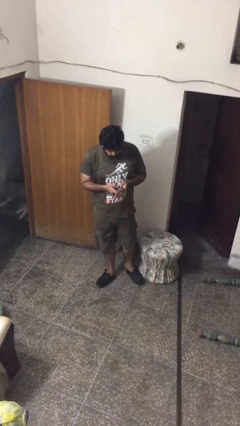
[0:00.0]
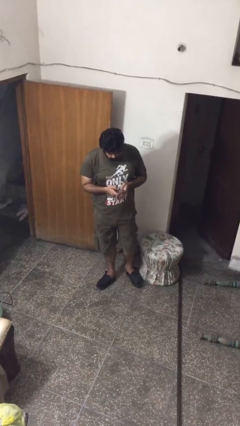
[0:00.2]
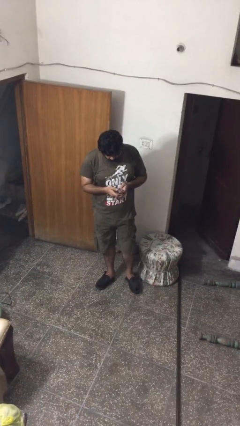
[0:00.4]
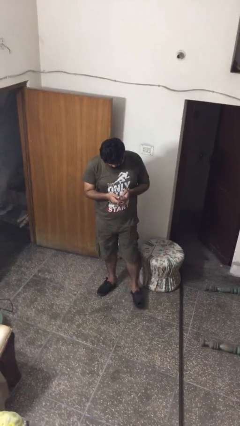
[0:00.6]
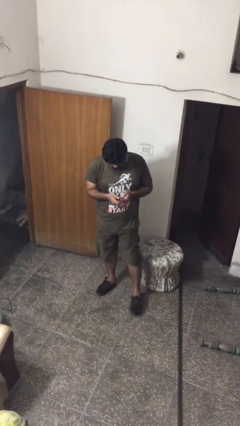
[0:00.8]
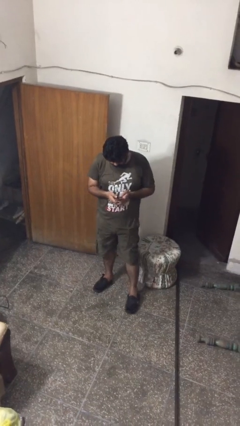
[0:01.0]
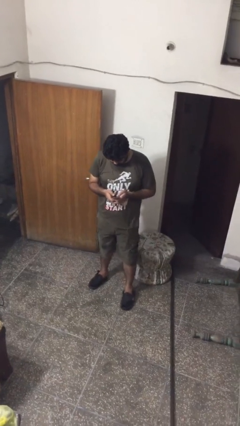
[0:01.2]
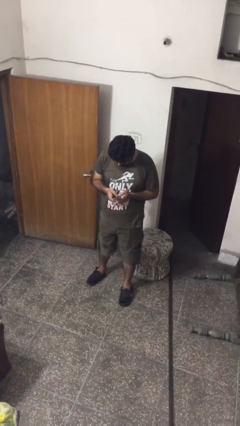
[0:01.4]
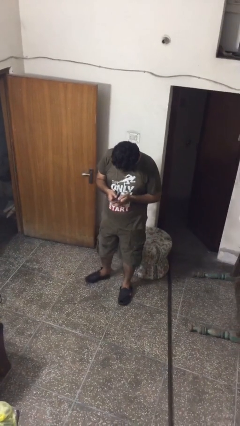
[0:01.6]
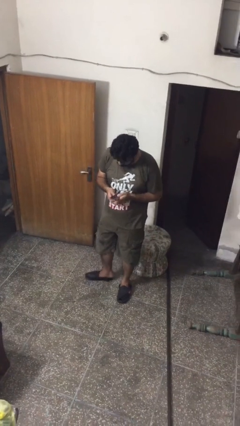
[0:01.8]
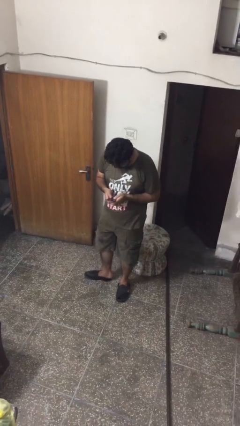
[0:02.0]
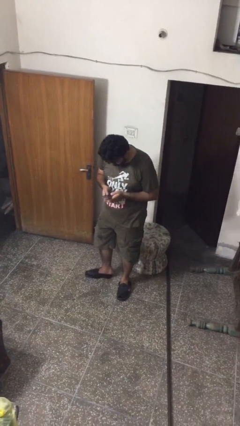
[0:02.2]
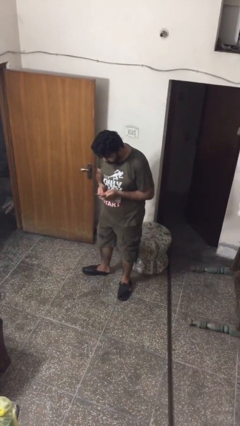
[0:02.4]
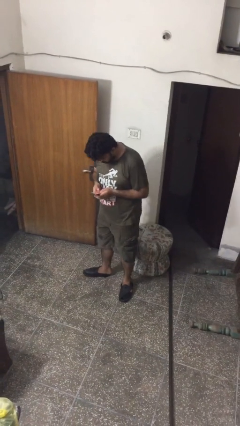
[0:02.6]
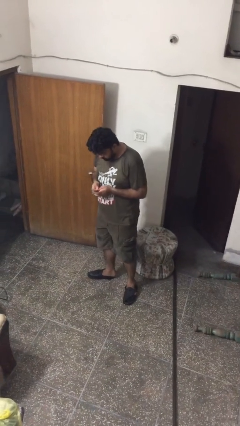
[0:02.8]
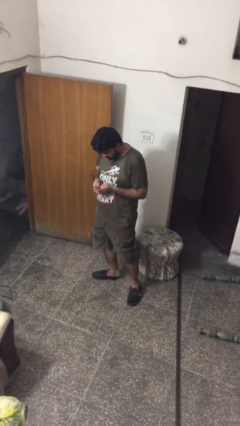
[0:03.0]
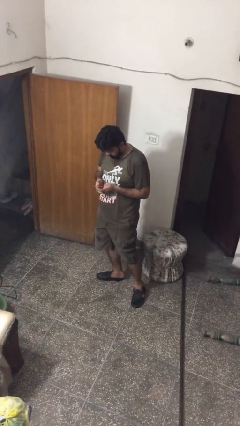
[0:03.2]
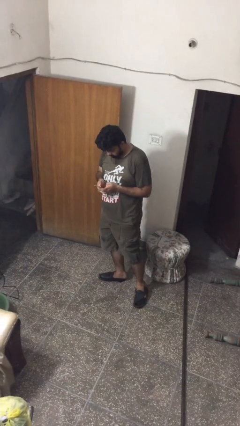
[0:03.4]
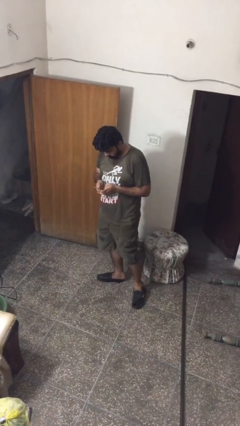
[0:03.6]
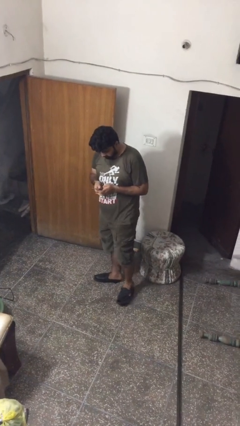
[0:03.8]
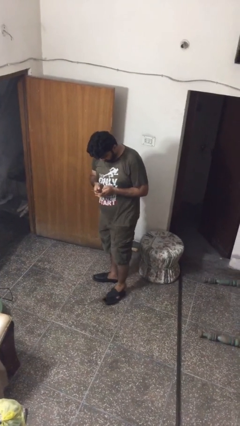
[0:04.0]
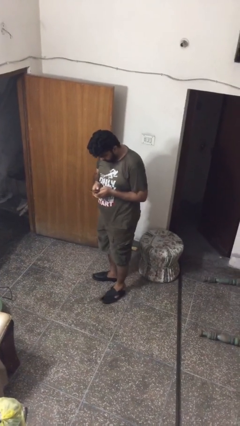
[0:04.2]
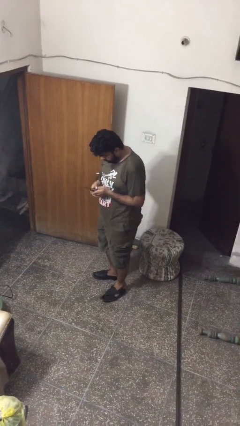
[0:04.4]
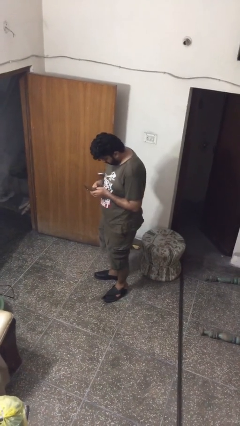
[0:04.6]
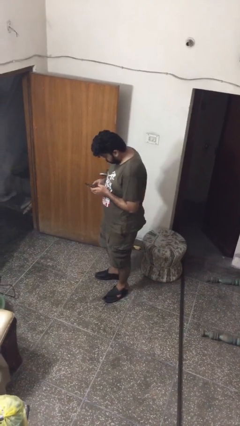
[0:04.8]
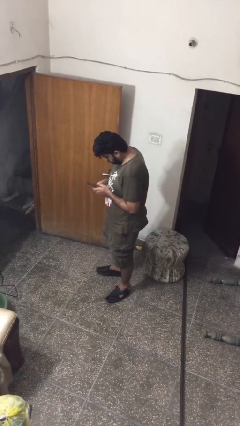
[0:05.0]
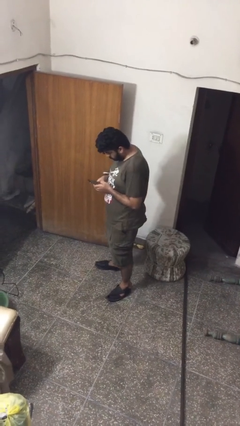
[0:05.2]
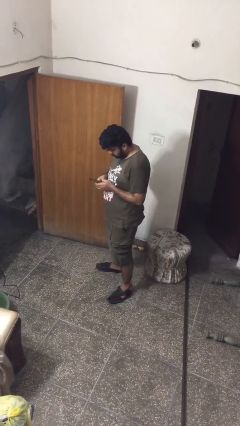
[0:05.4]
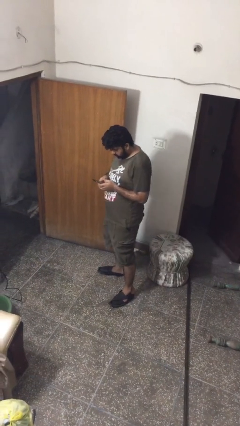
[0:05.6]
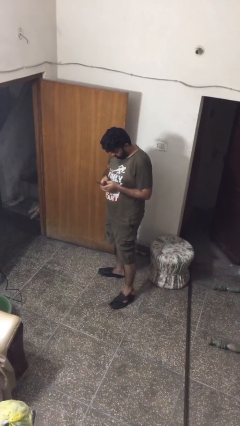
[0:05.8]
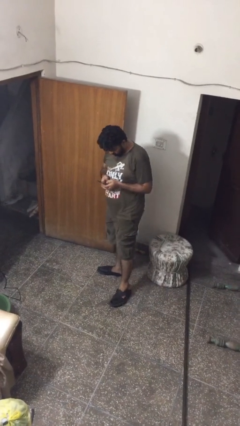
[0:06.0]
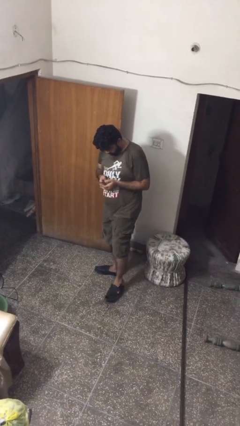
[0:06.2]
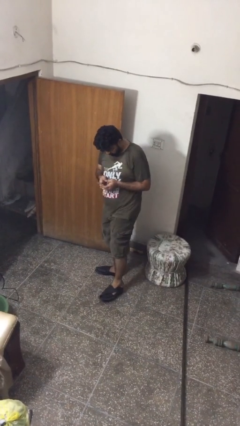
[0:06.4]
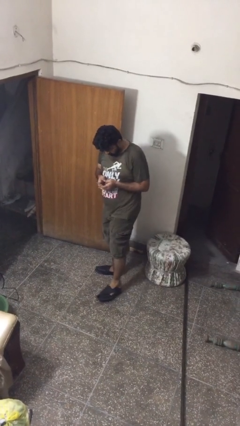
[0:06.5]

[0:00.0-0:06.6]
person texts on phone

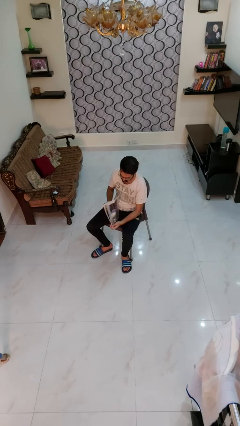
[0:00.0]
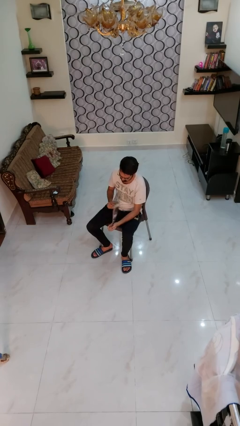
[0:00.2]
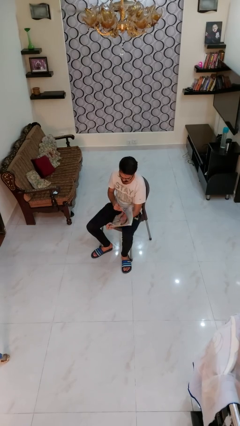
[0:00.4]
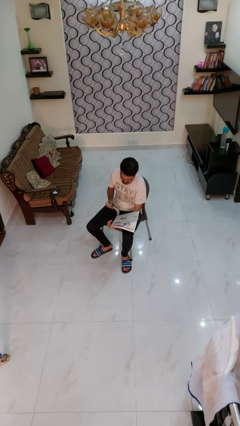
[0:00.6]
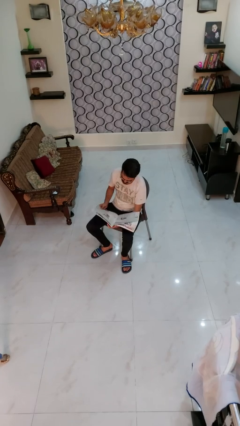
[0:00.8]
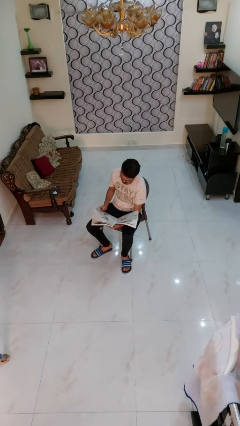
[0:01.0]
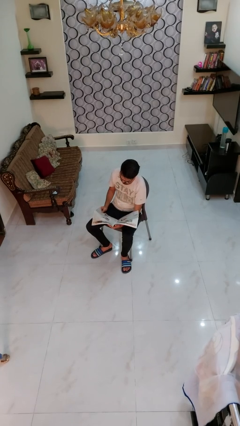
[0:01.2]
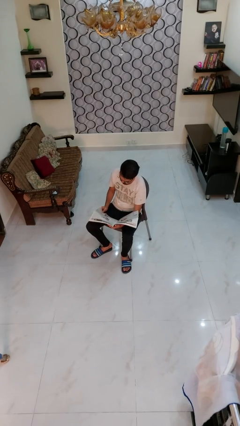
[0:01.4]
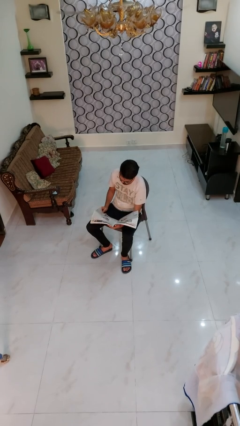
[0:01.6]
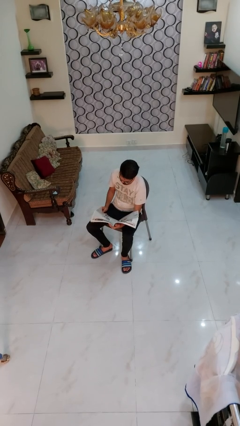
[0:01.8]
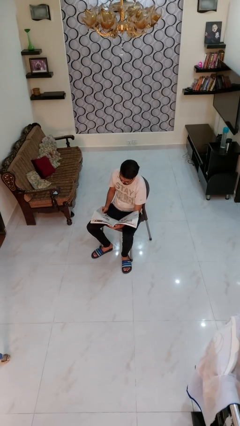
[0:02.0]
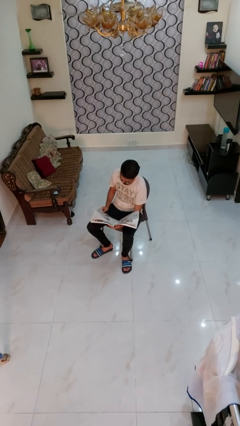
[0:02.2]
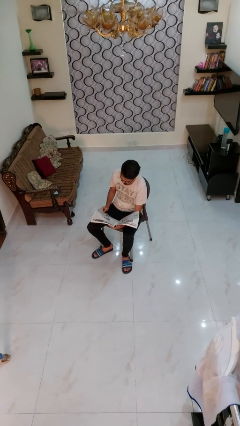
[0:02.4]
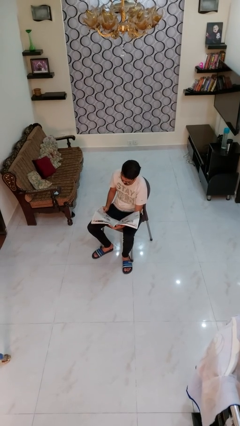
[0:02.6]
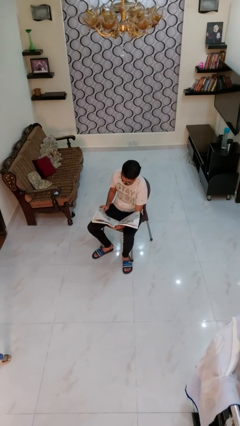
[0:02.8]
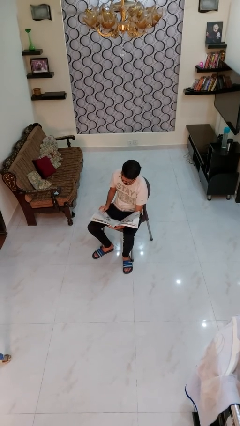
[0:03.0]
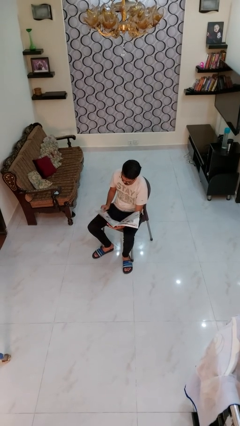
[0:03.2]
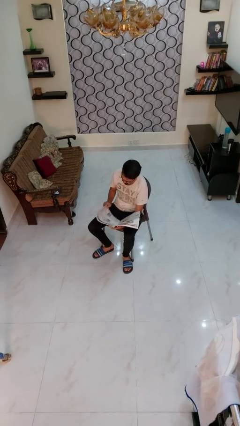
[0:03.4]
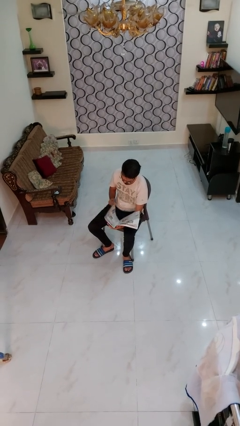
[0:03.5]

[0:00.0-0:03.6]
person reads magazine

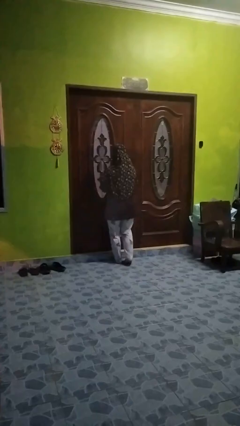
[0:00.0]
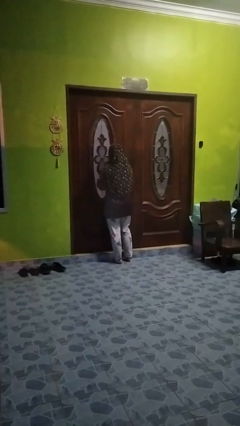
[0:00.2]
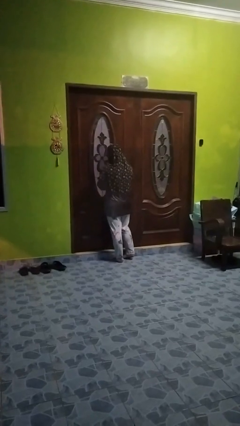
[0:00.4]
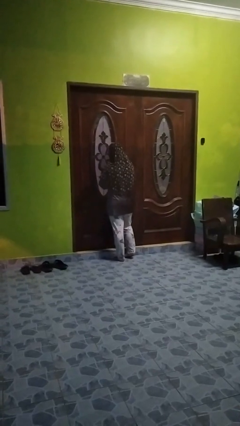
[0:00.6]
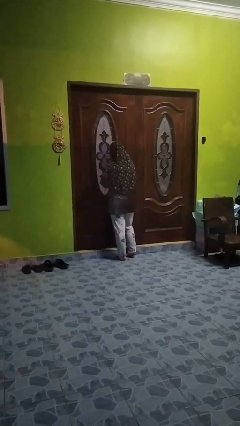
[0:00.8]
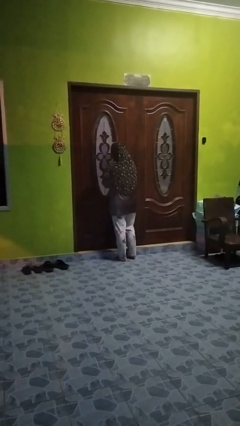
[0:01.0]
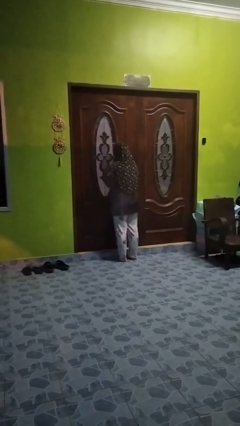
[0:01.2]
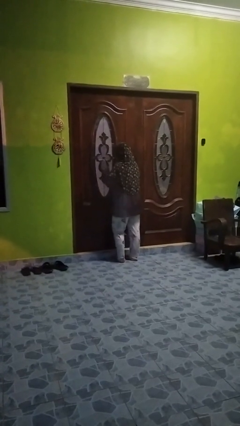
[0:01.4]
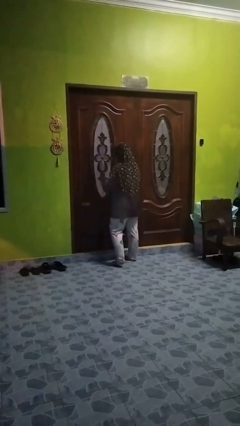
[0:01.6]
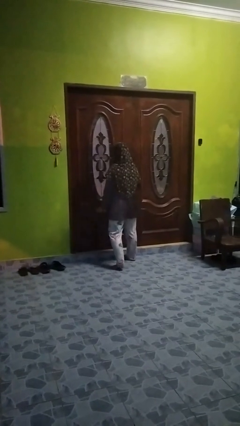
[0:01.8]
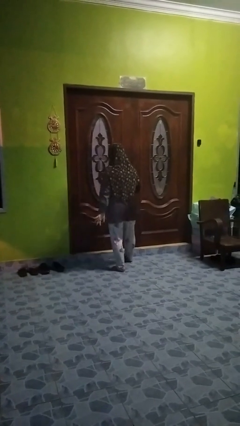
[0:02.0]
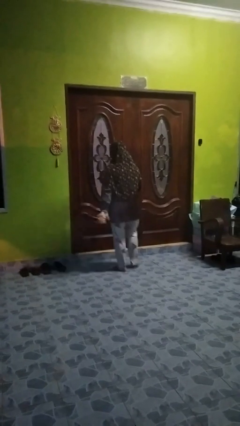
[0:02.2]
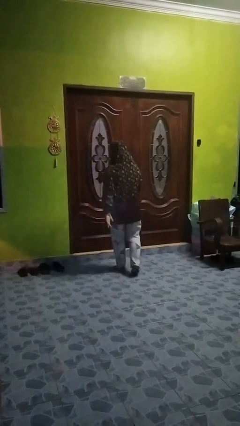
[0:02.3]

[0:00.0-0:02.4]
person bumps into wall

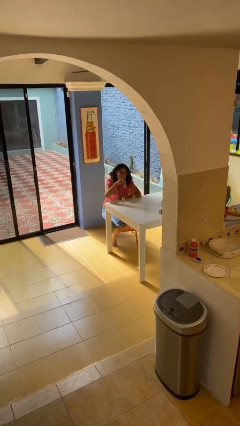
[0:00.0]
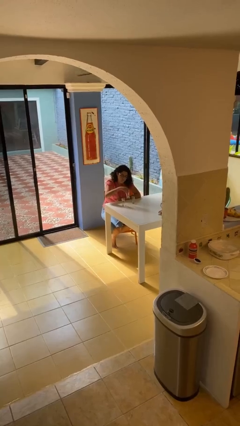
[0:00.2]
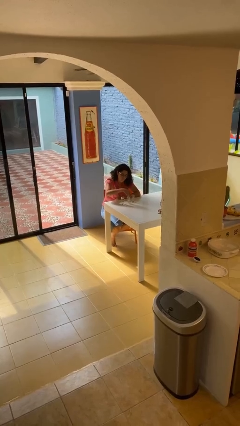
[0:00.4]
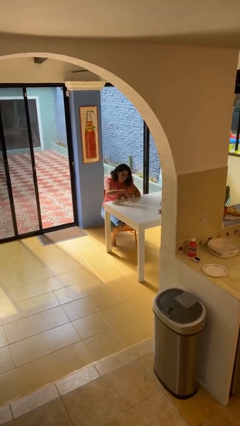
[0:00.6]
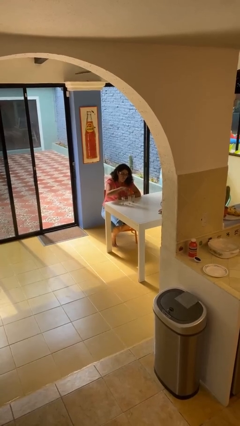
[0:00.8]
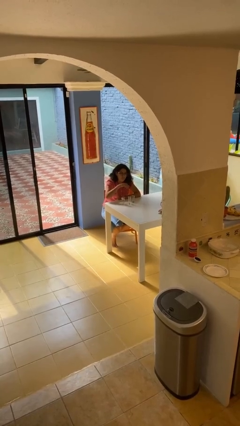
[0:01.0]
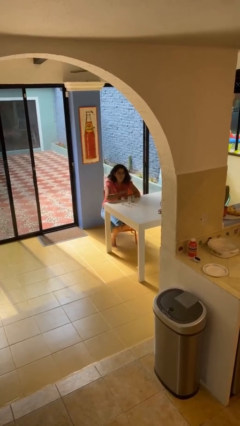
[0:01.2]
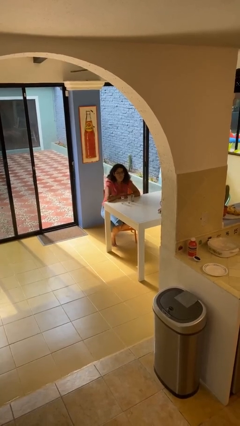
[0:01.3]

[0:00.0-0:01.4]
person puts down object on table

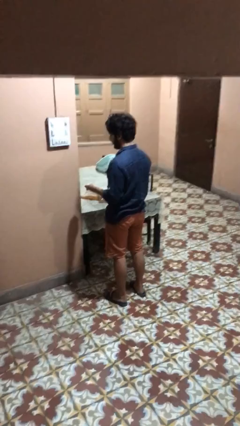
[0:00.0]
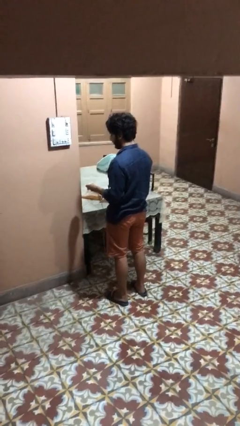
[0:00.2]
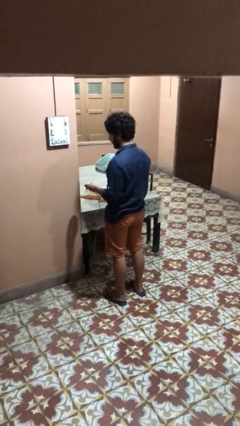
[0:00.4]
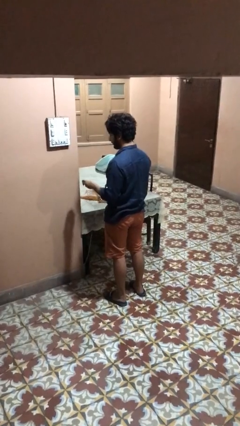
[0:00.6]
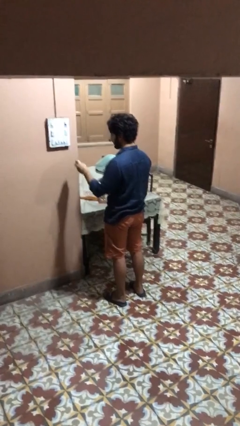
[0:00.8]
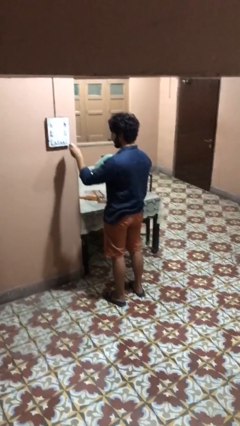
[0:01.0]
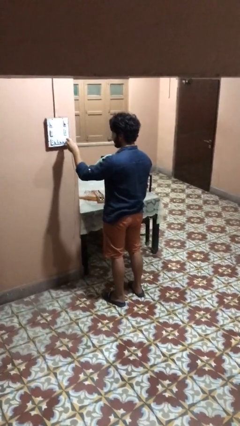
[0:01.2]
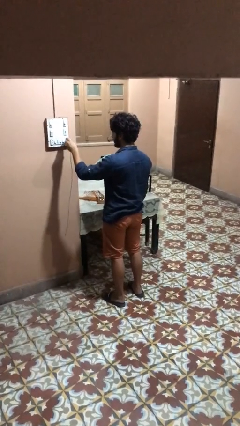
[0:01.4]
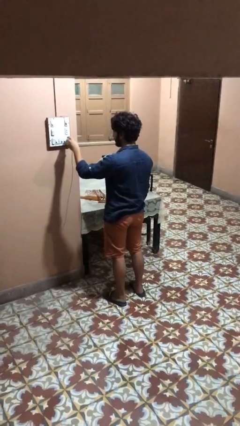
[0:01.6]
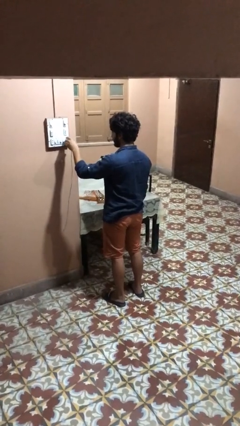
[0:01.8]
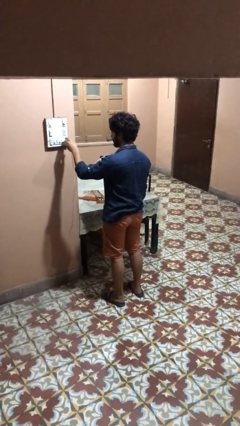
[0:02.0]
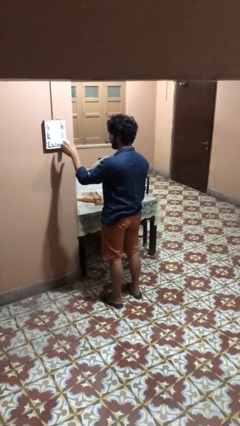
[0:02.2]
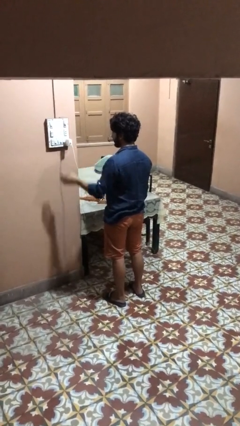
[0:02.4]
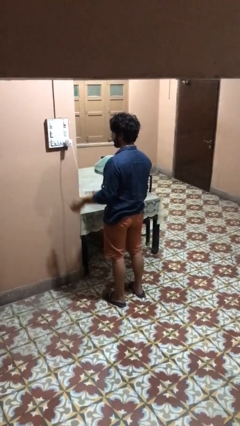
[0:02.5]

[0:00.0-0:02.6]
person plugs into electrical socket

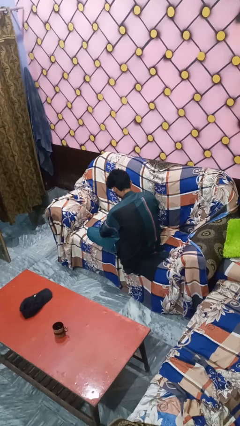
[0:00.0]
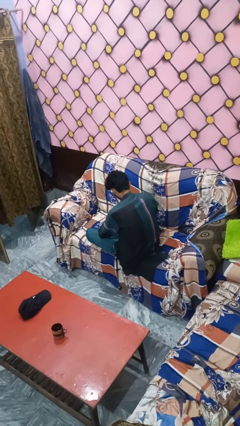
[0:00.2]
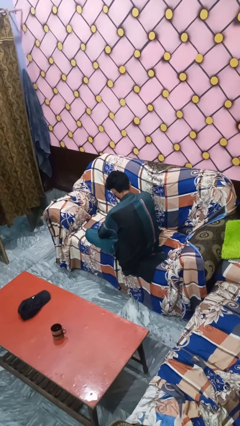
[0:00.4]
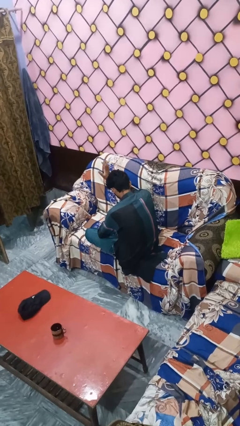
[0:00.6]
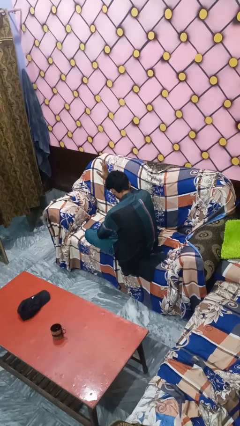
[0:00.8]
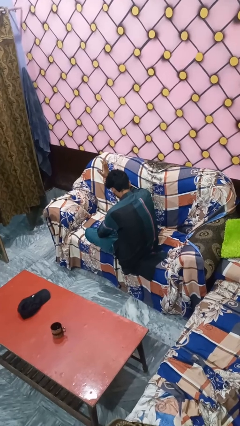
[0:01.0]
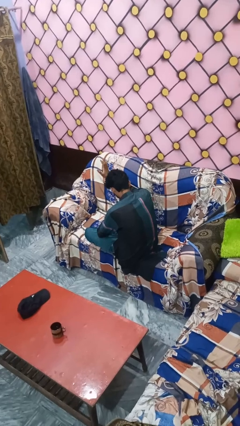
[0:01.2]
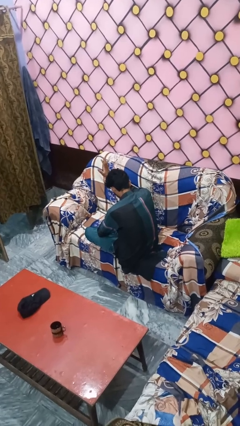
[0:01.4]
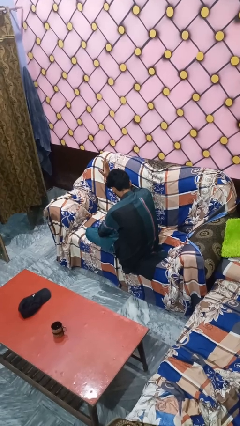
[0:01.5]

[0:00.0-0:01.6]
person gestures stop
